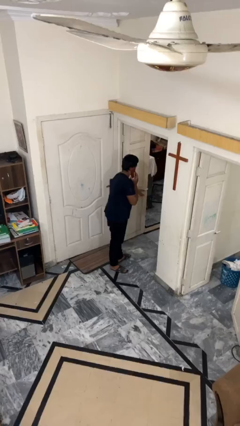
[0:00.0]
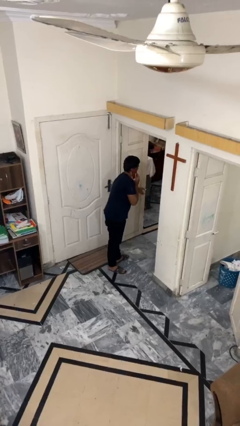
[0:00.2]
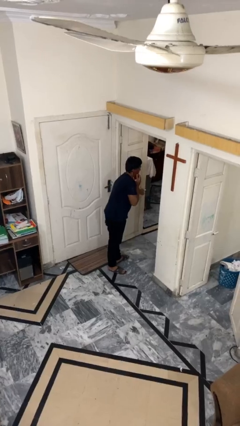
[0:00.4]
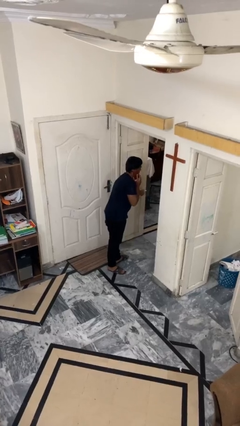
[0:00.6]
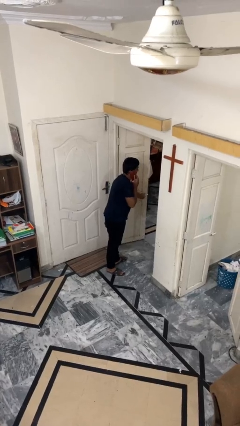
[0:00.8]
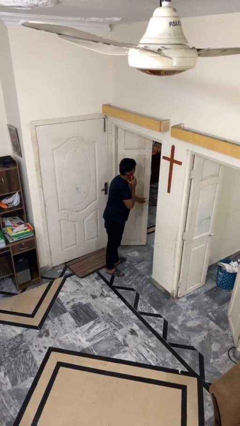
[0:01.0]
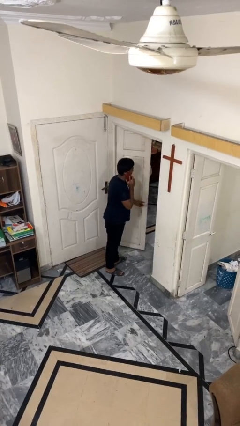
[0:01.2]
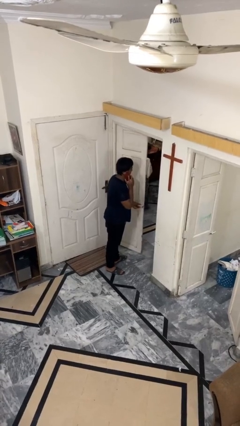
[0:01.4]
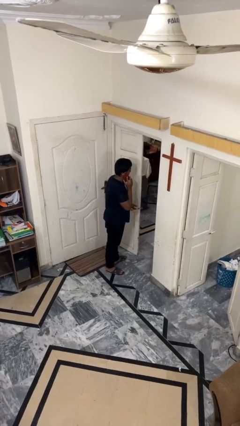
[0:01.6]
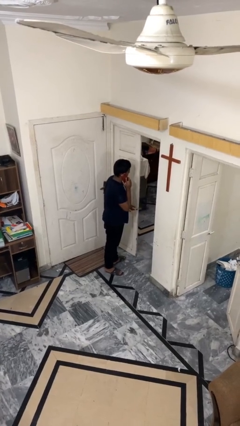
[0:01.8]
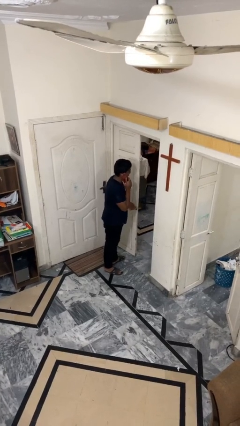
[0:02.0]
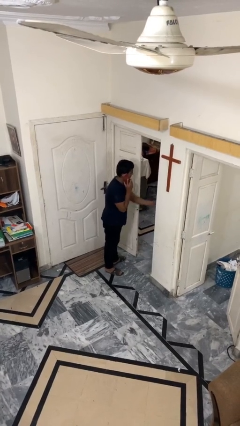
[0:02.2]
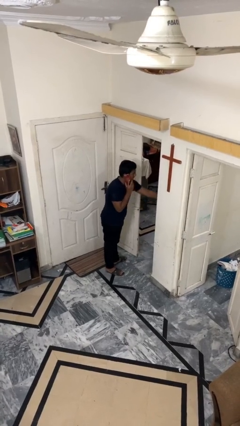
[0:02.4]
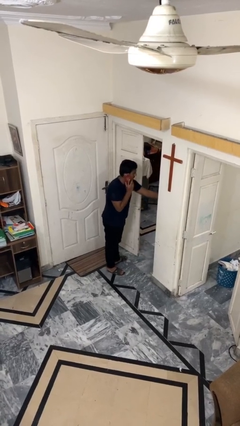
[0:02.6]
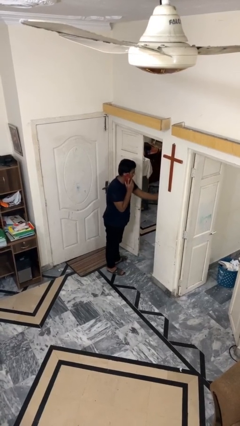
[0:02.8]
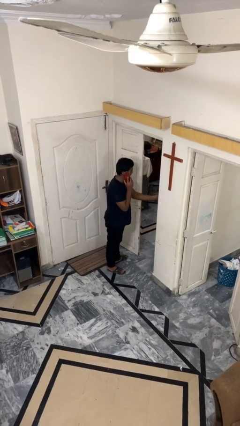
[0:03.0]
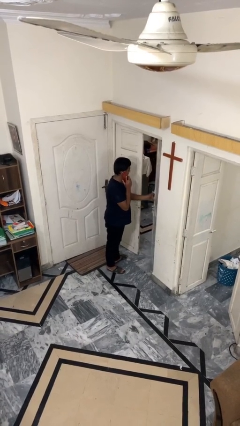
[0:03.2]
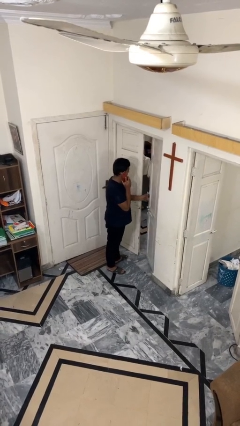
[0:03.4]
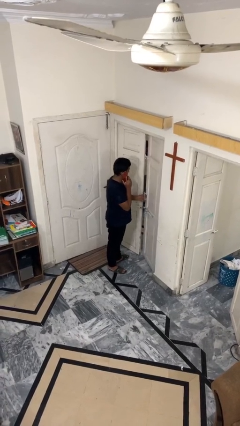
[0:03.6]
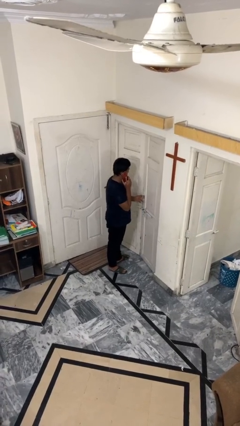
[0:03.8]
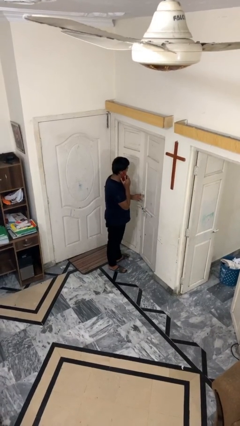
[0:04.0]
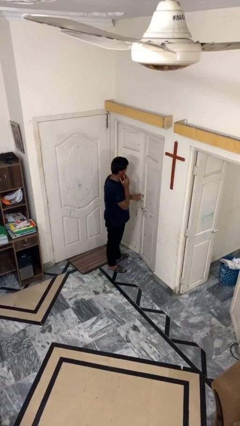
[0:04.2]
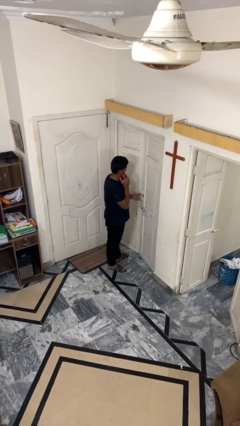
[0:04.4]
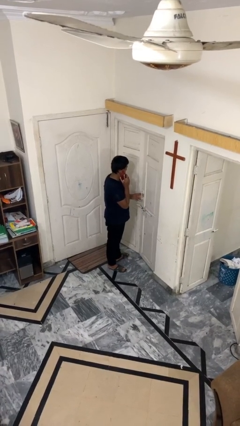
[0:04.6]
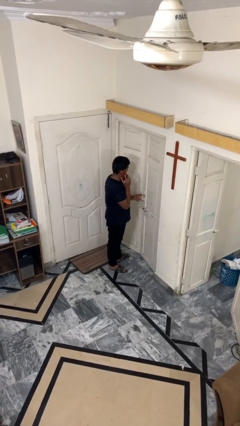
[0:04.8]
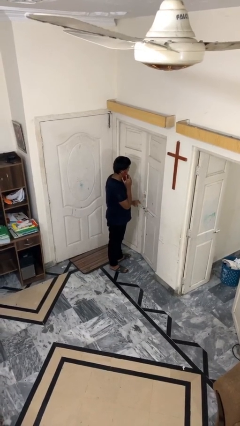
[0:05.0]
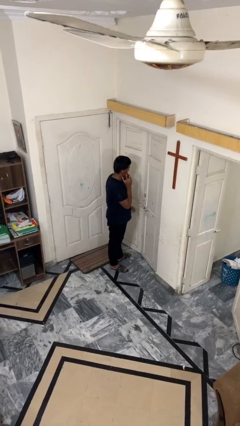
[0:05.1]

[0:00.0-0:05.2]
person closes facility door

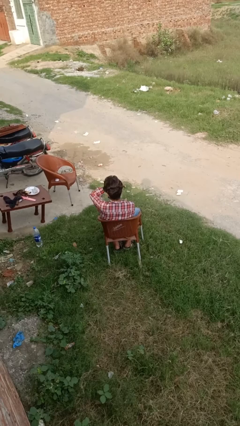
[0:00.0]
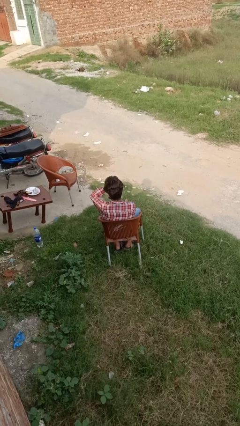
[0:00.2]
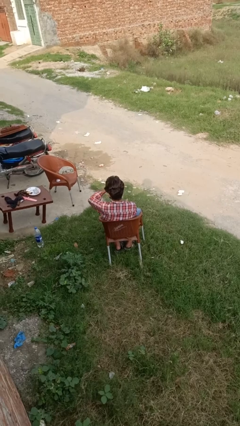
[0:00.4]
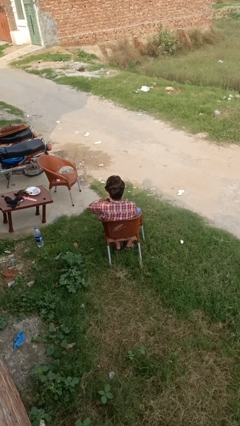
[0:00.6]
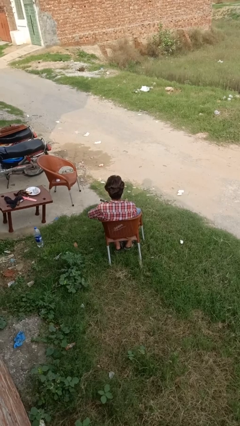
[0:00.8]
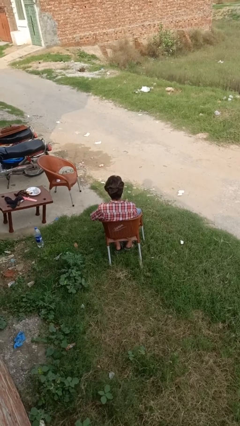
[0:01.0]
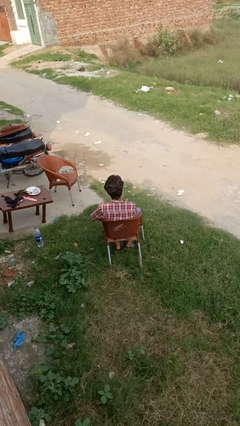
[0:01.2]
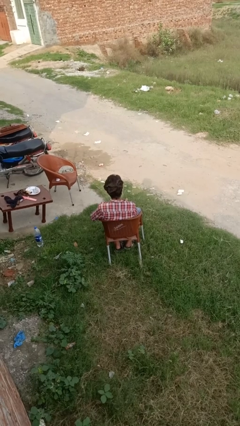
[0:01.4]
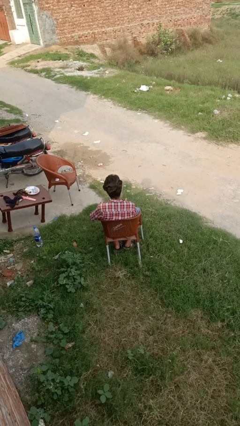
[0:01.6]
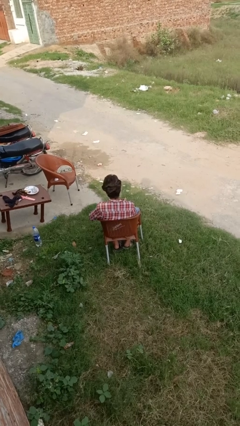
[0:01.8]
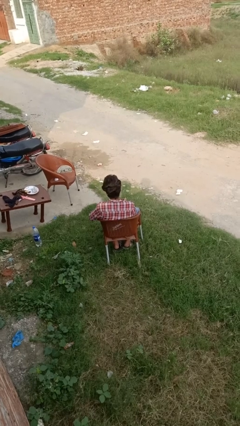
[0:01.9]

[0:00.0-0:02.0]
person takes off wristwatch

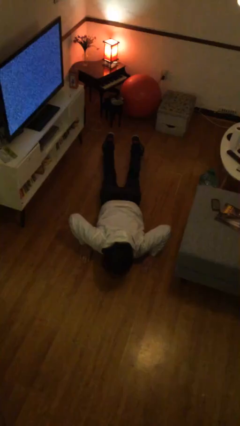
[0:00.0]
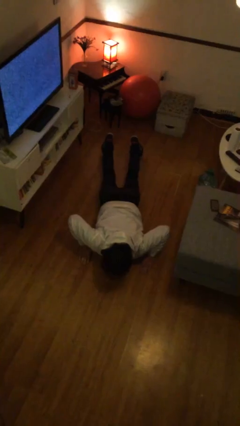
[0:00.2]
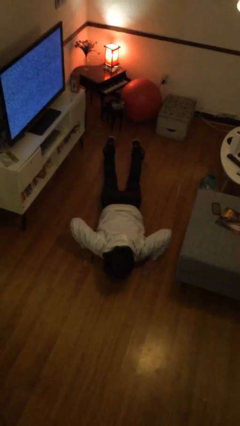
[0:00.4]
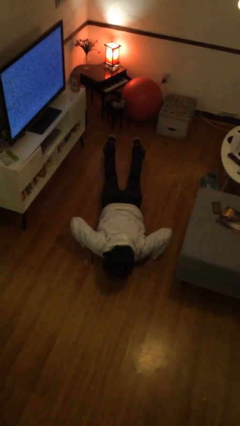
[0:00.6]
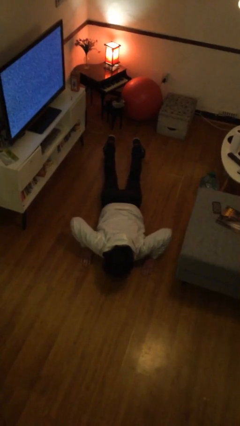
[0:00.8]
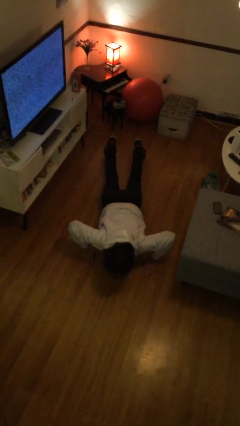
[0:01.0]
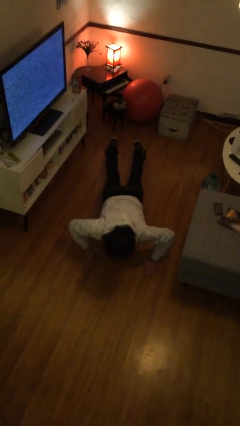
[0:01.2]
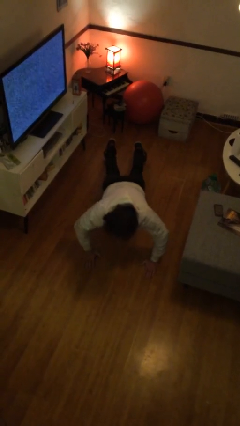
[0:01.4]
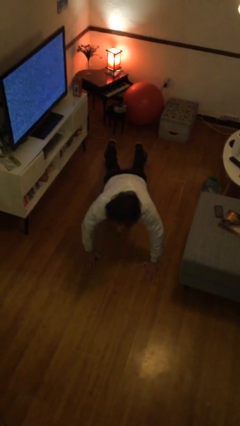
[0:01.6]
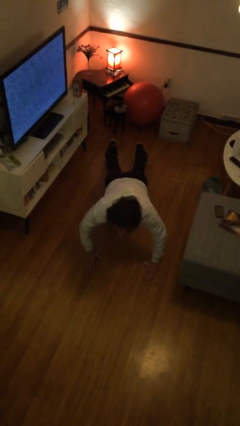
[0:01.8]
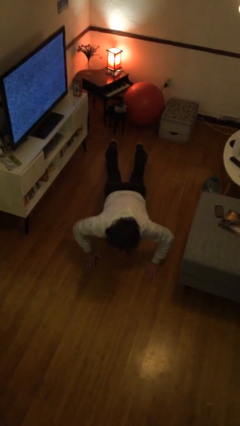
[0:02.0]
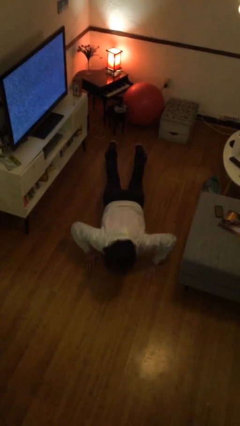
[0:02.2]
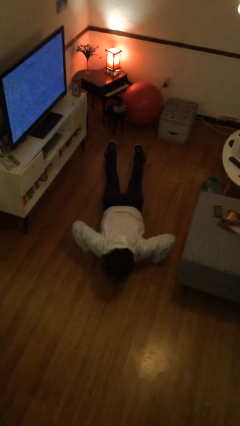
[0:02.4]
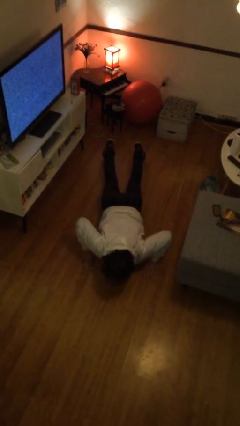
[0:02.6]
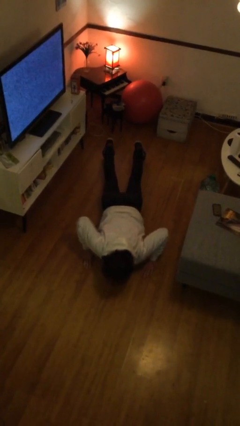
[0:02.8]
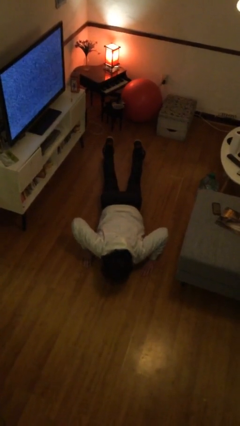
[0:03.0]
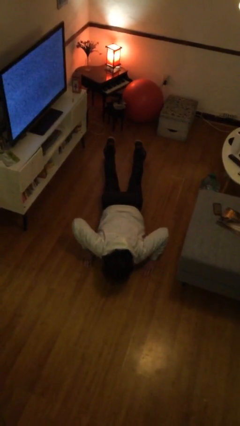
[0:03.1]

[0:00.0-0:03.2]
person exercises with pushup

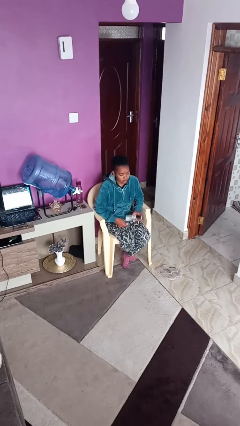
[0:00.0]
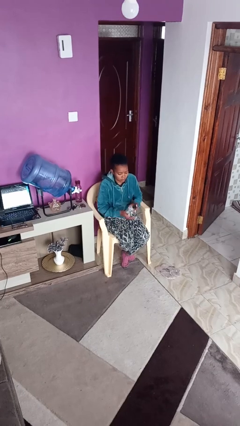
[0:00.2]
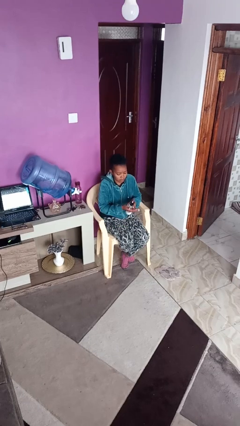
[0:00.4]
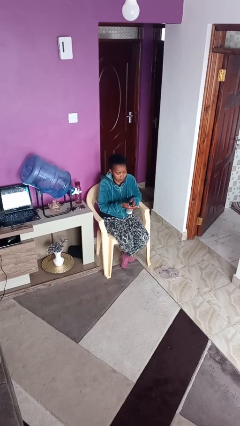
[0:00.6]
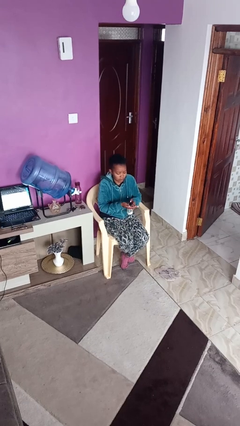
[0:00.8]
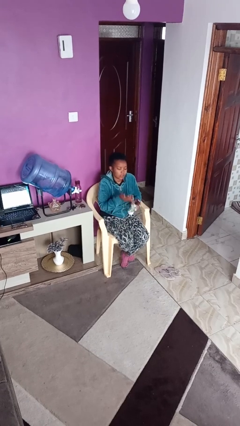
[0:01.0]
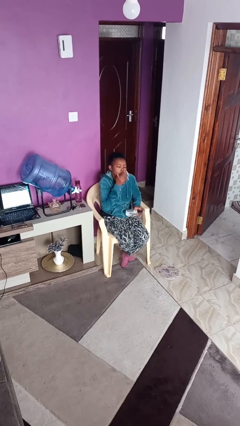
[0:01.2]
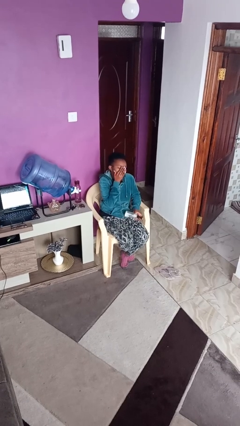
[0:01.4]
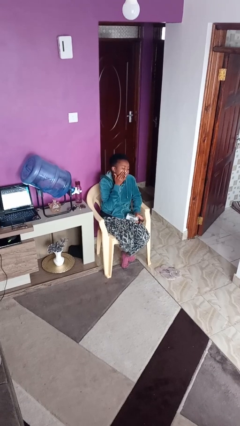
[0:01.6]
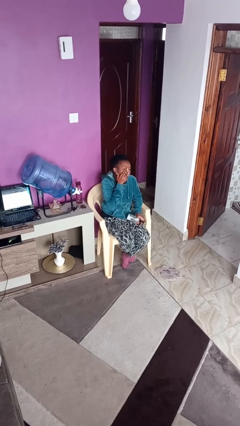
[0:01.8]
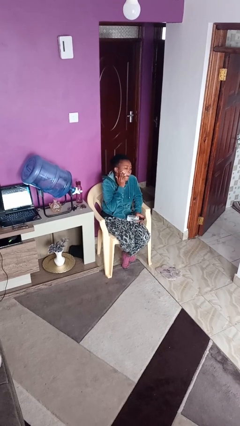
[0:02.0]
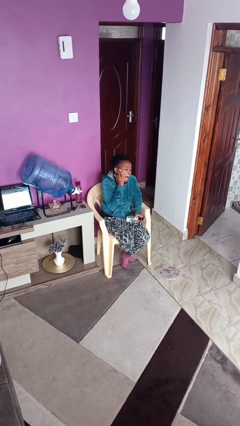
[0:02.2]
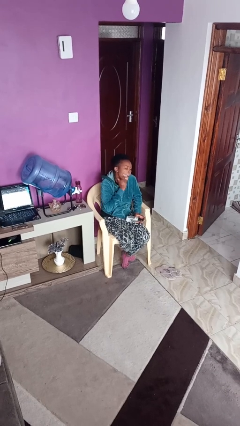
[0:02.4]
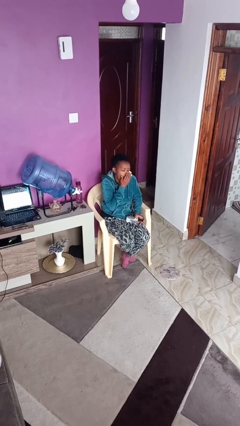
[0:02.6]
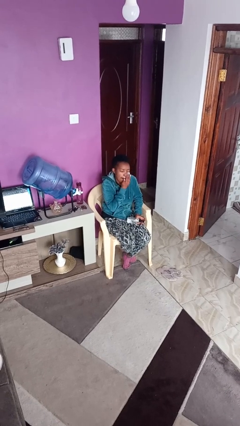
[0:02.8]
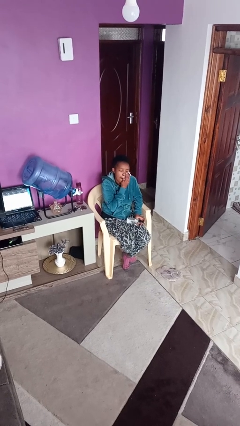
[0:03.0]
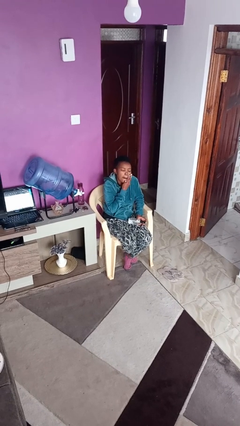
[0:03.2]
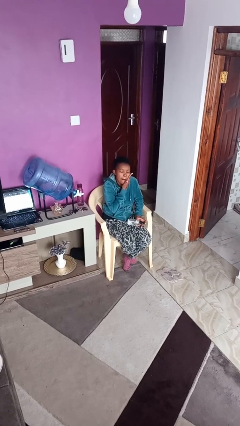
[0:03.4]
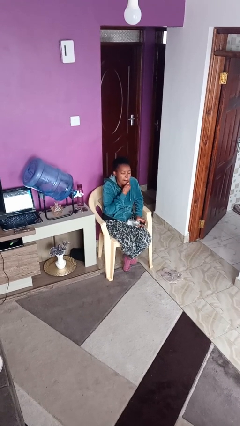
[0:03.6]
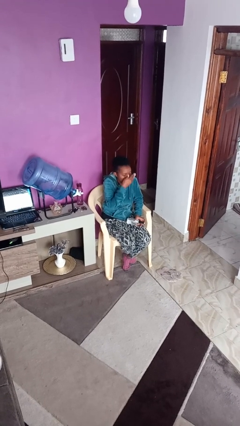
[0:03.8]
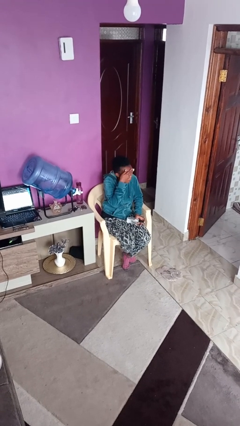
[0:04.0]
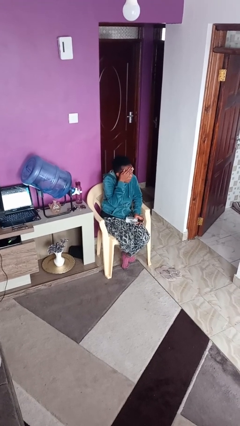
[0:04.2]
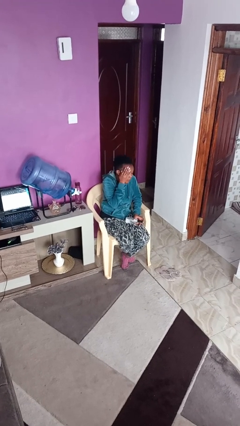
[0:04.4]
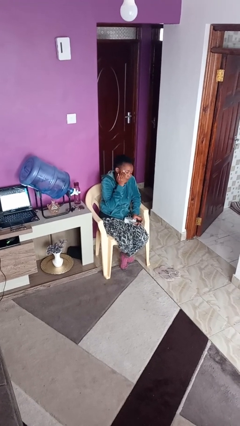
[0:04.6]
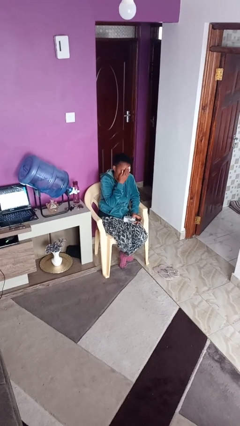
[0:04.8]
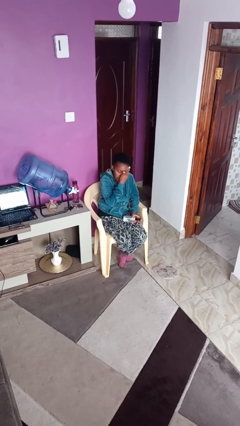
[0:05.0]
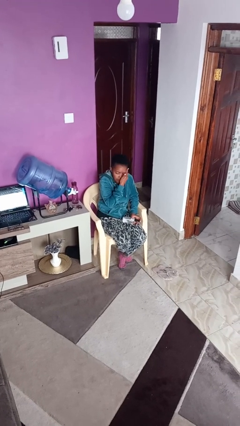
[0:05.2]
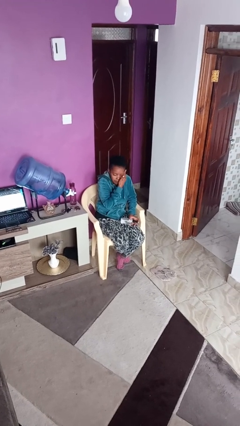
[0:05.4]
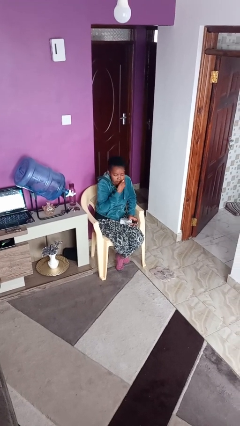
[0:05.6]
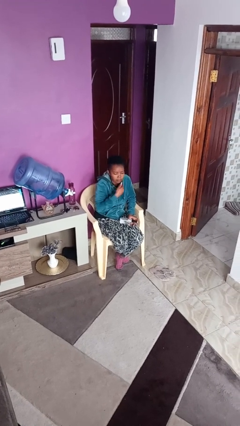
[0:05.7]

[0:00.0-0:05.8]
person applies facial moisturizer

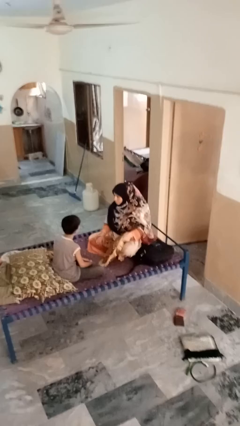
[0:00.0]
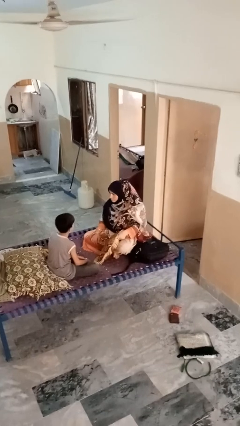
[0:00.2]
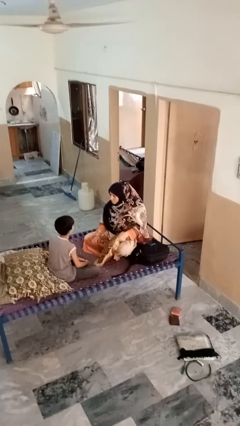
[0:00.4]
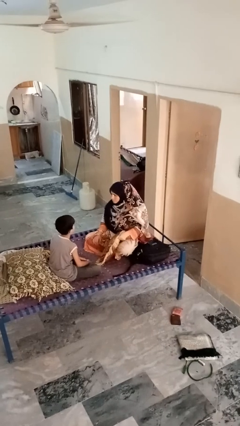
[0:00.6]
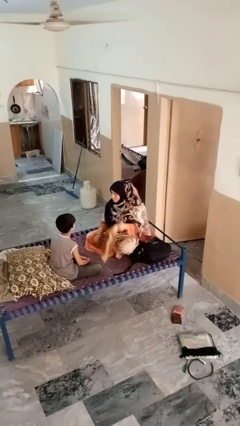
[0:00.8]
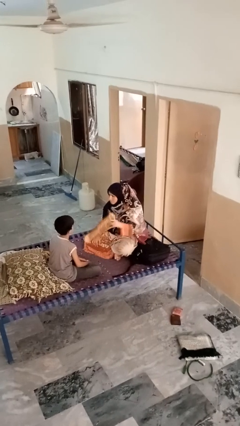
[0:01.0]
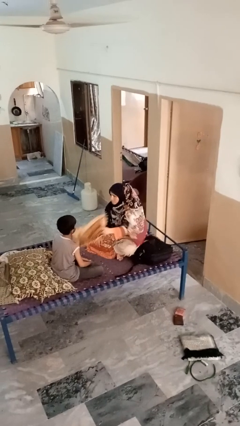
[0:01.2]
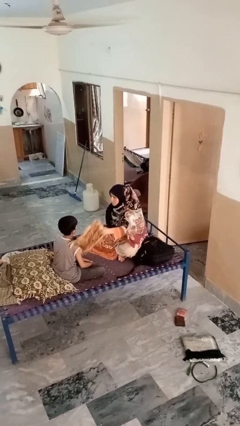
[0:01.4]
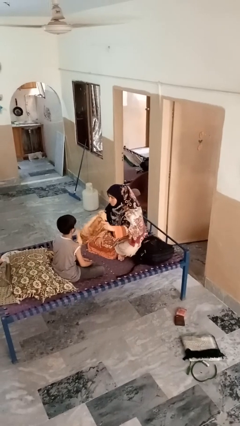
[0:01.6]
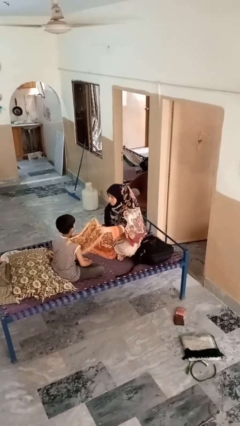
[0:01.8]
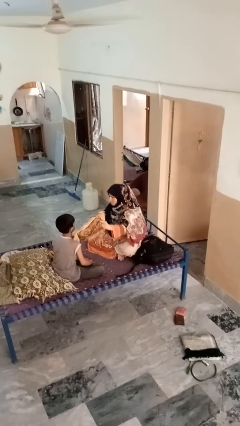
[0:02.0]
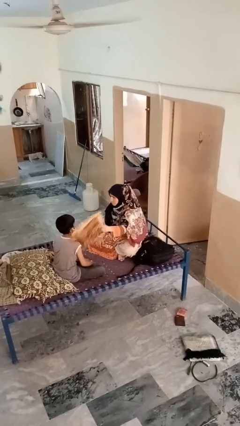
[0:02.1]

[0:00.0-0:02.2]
person hits person with pillow
